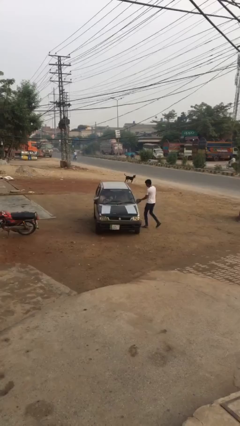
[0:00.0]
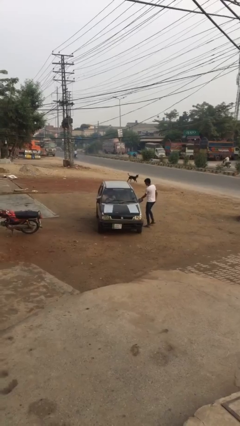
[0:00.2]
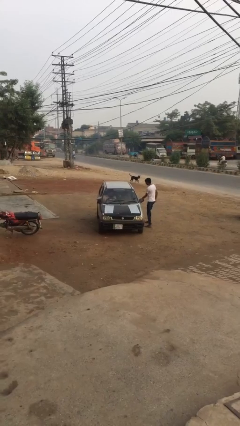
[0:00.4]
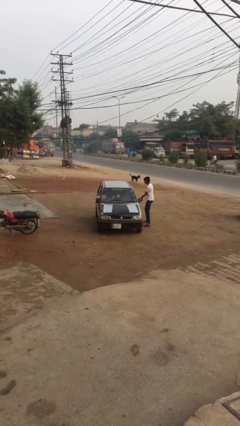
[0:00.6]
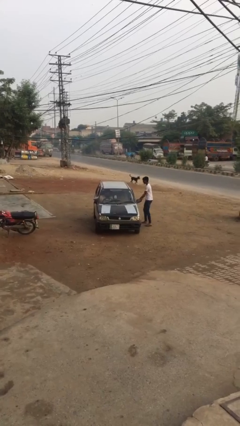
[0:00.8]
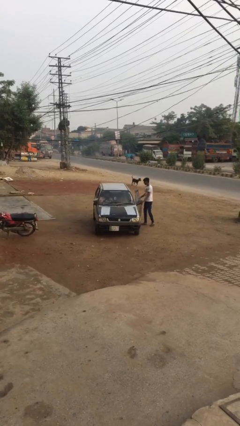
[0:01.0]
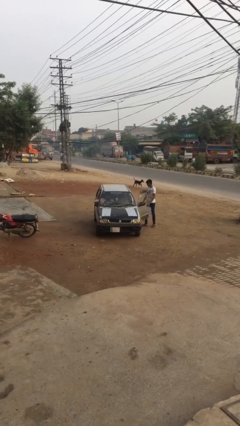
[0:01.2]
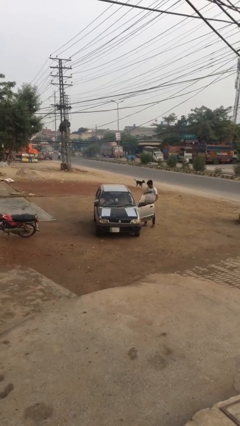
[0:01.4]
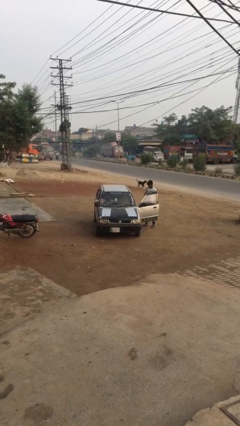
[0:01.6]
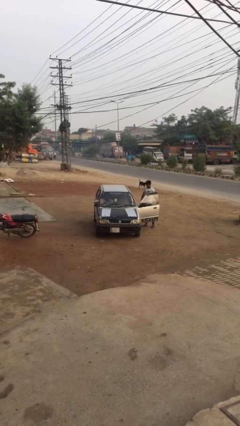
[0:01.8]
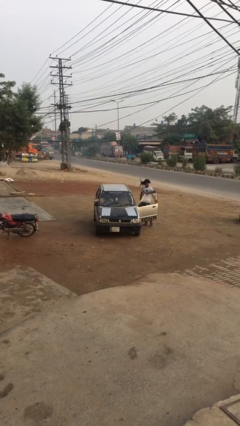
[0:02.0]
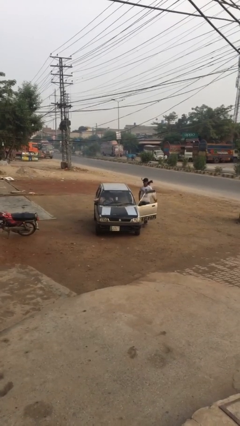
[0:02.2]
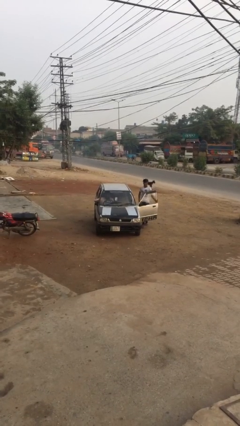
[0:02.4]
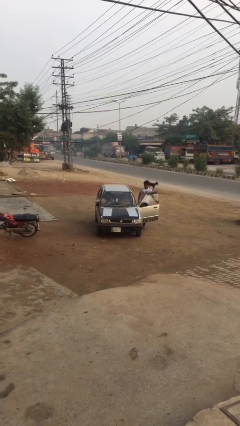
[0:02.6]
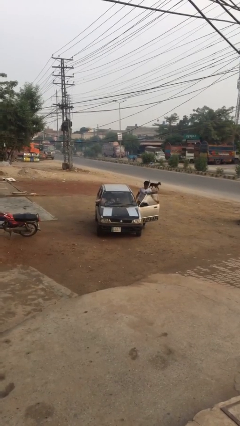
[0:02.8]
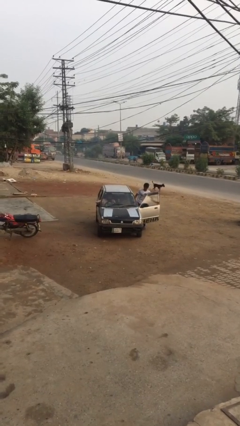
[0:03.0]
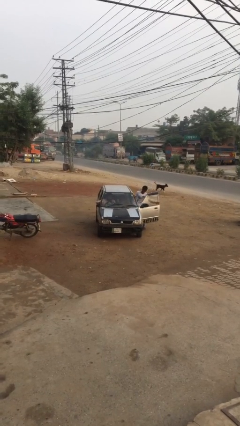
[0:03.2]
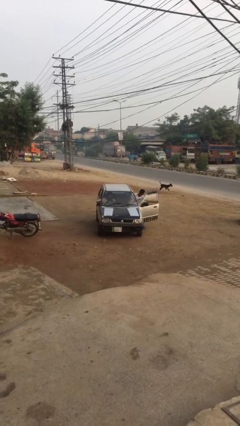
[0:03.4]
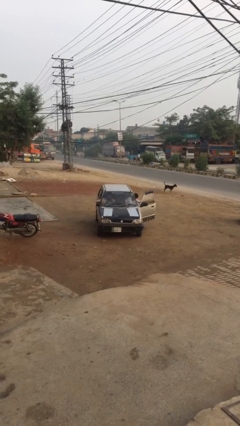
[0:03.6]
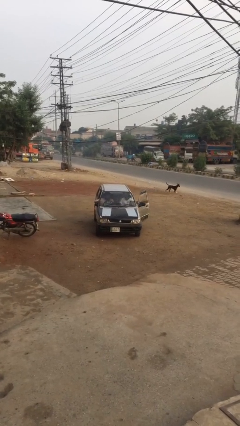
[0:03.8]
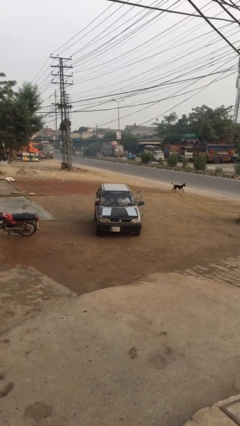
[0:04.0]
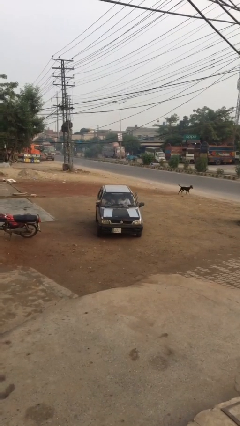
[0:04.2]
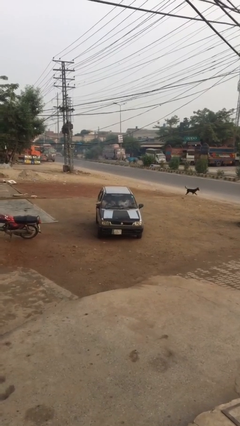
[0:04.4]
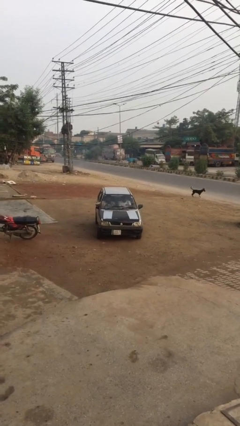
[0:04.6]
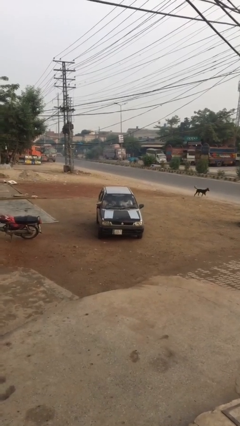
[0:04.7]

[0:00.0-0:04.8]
car picks up person

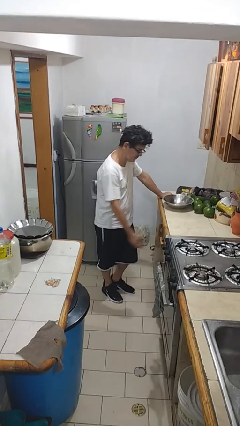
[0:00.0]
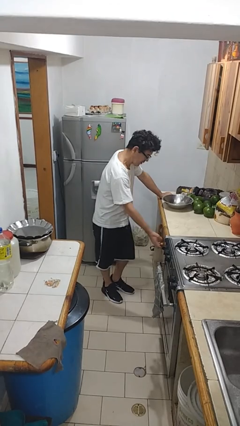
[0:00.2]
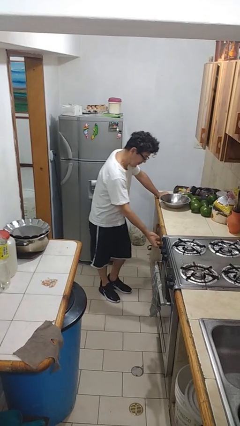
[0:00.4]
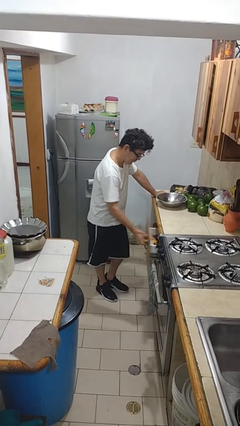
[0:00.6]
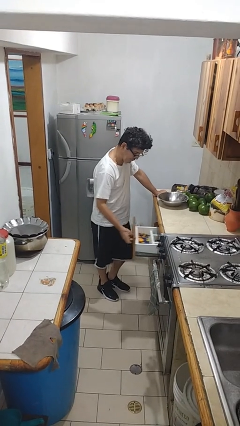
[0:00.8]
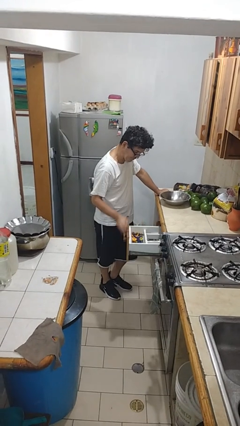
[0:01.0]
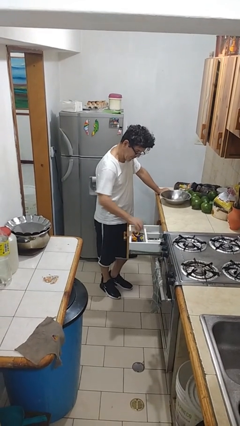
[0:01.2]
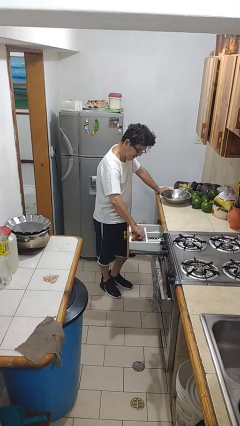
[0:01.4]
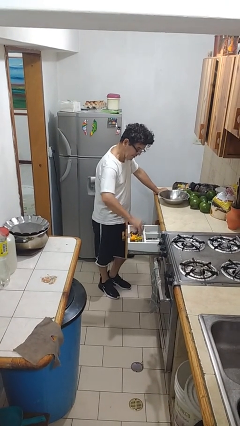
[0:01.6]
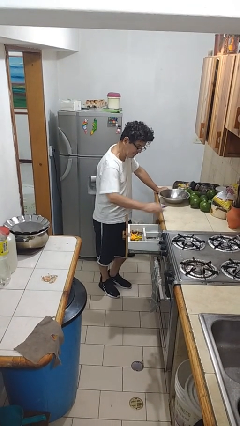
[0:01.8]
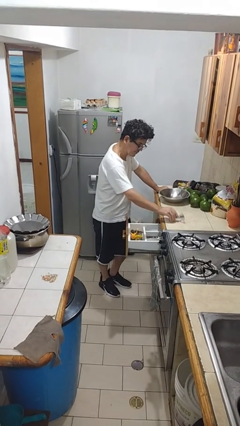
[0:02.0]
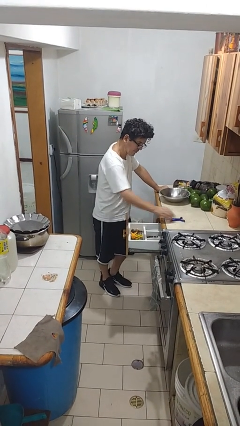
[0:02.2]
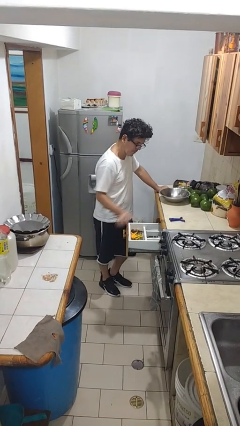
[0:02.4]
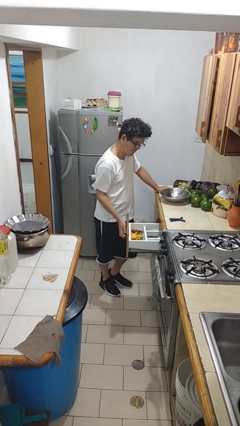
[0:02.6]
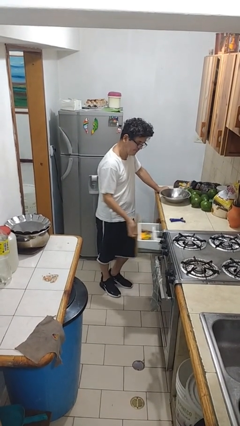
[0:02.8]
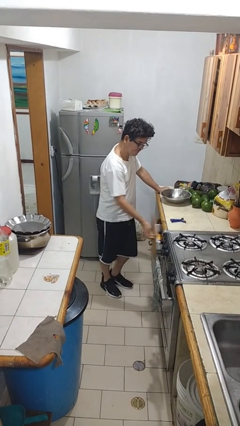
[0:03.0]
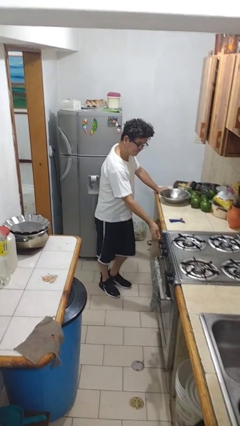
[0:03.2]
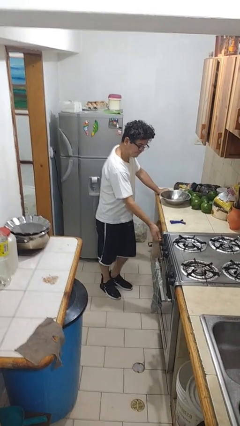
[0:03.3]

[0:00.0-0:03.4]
person takes object from kitchen drawer

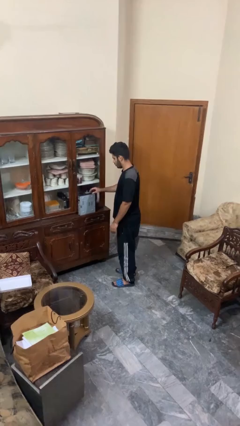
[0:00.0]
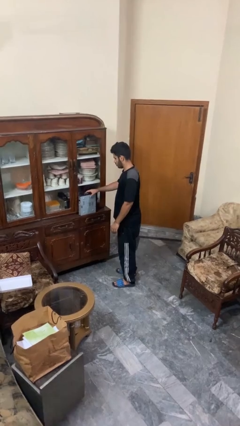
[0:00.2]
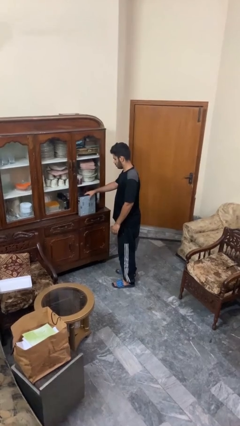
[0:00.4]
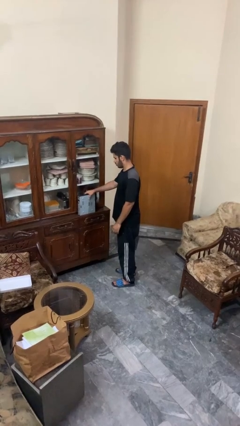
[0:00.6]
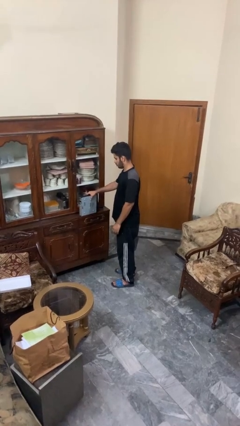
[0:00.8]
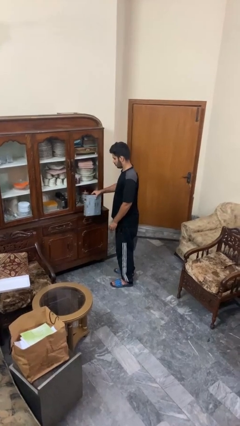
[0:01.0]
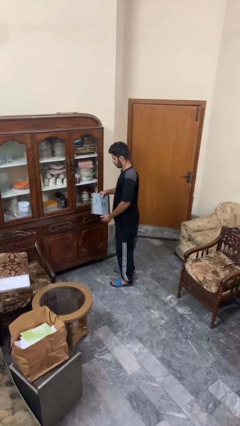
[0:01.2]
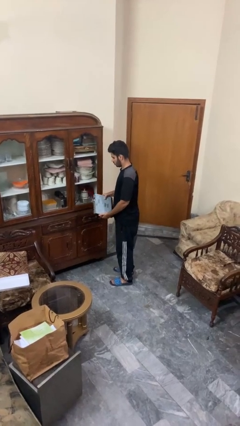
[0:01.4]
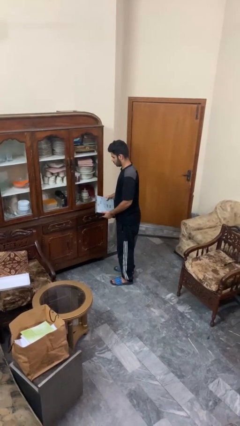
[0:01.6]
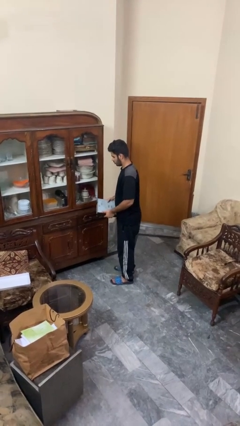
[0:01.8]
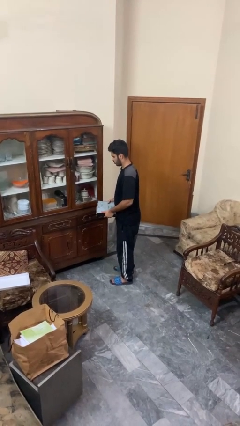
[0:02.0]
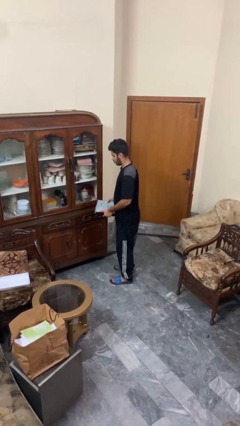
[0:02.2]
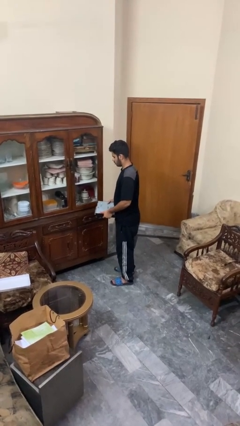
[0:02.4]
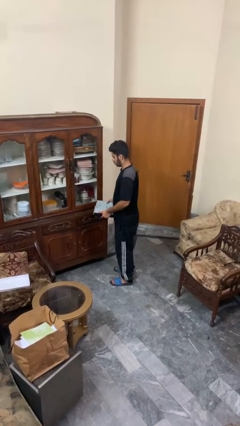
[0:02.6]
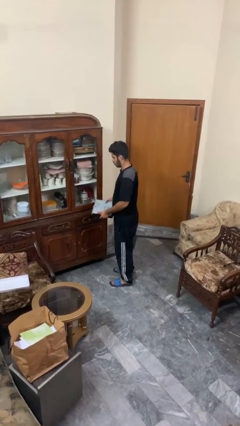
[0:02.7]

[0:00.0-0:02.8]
person picks up object from countertop

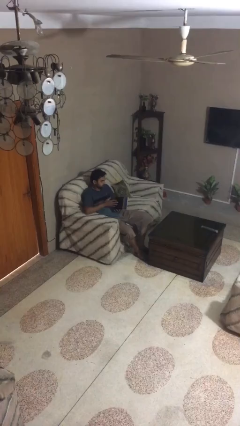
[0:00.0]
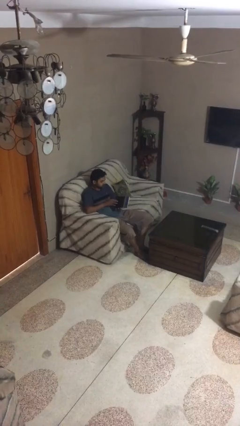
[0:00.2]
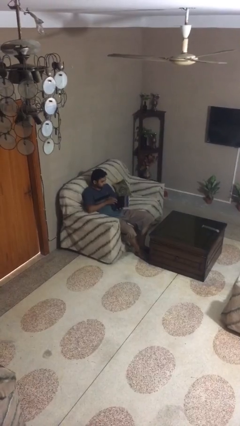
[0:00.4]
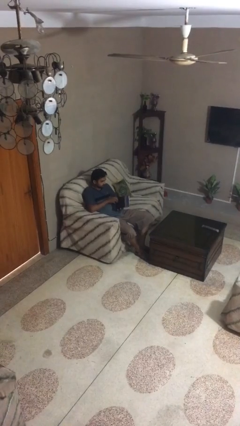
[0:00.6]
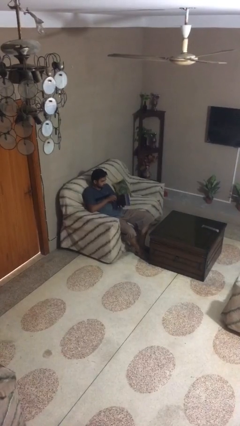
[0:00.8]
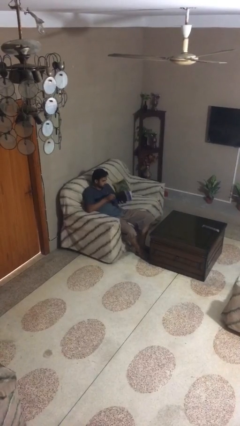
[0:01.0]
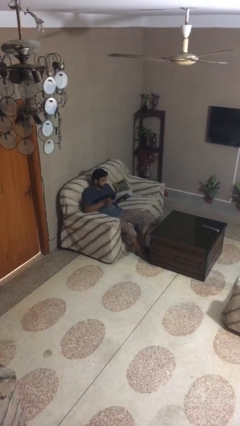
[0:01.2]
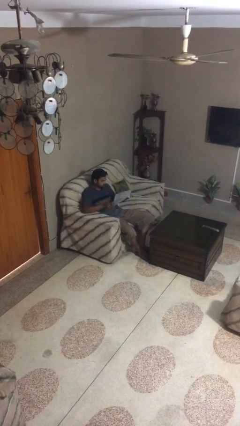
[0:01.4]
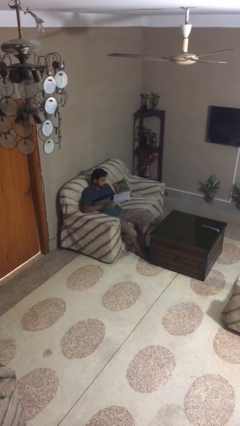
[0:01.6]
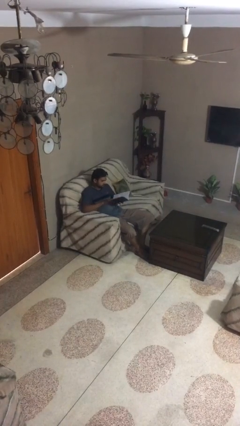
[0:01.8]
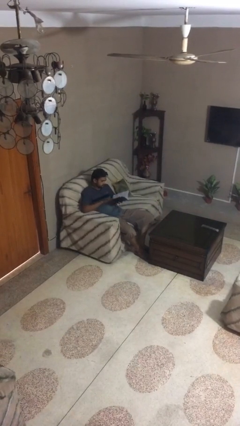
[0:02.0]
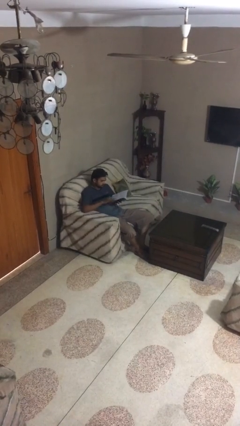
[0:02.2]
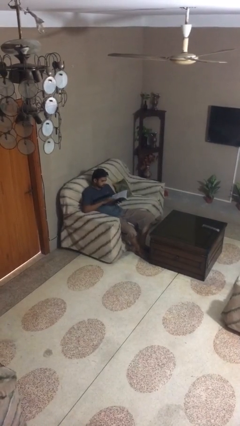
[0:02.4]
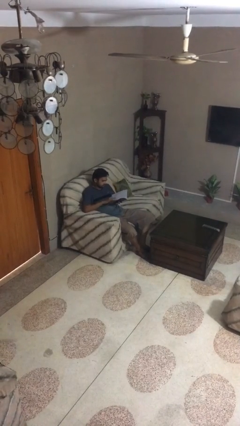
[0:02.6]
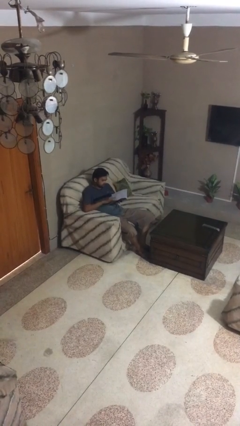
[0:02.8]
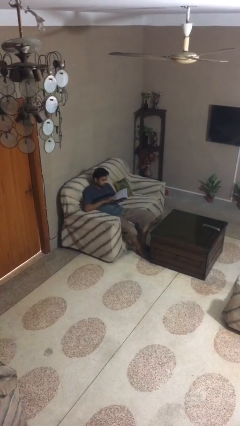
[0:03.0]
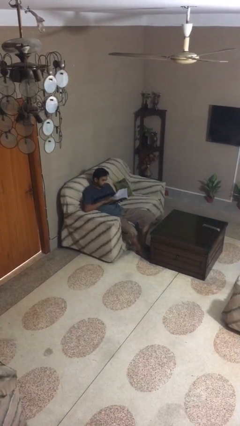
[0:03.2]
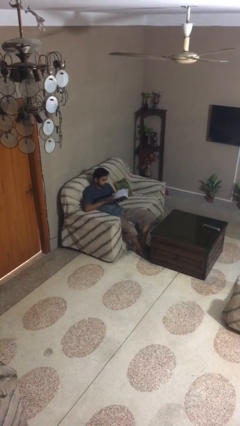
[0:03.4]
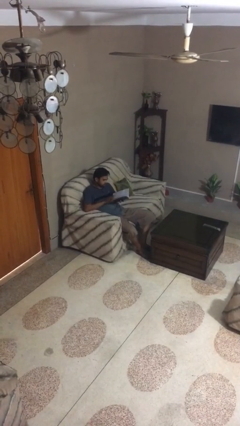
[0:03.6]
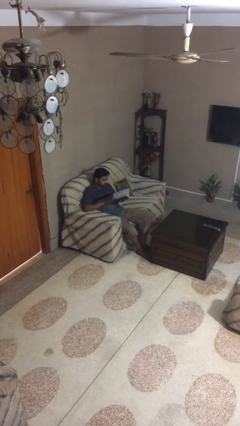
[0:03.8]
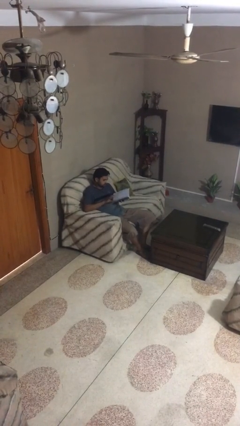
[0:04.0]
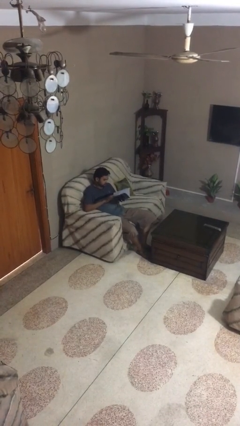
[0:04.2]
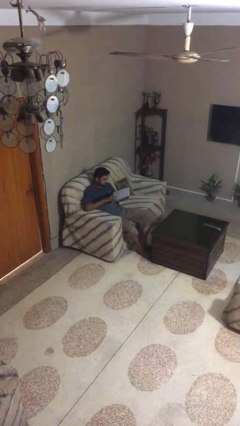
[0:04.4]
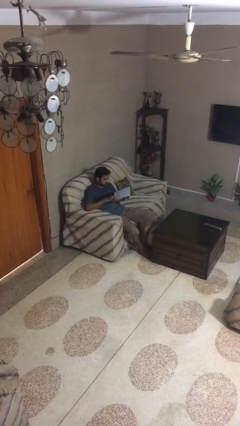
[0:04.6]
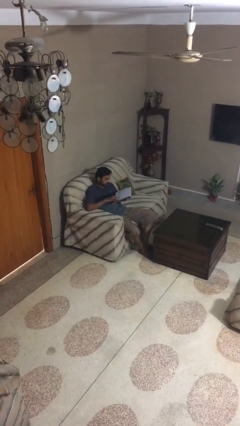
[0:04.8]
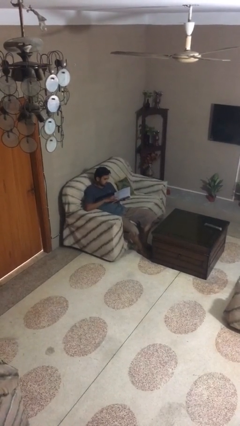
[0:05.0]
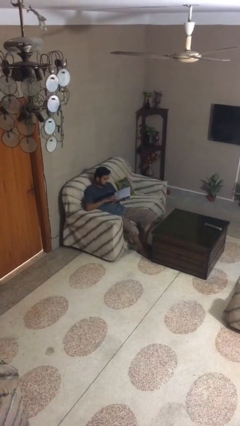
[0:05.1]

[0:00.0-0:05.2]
person reads document

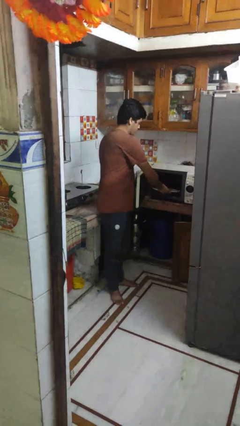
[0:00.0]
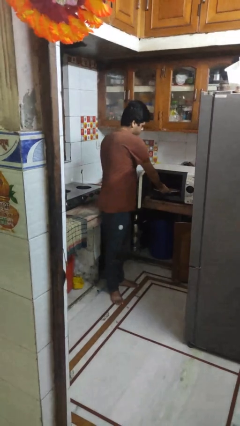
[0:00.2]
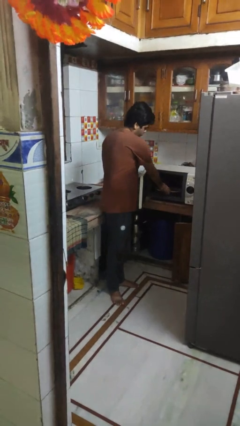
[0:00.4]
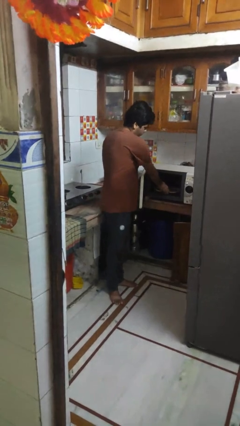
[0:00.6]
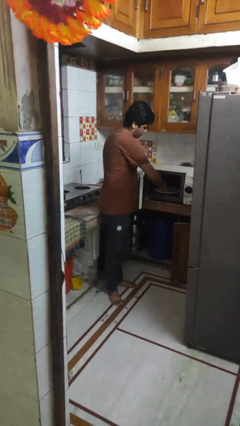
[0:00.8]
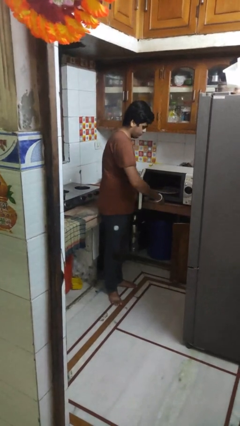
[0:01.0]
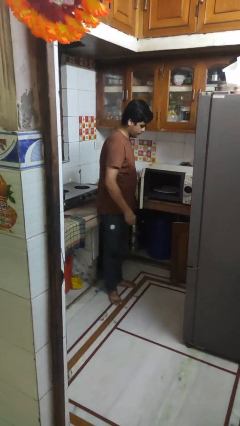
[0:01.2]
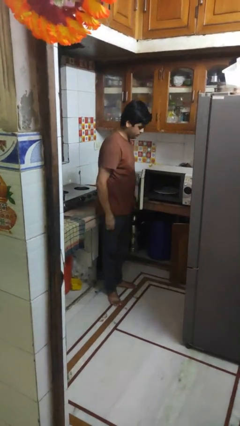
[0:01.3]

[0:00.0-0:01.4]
person puts object into microwave
